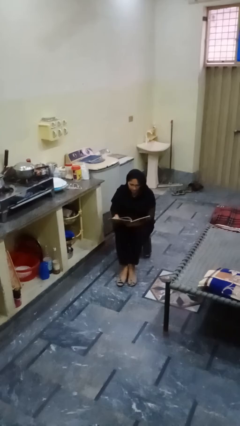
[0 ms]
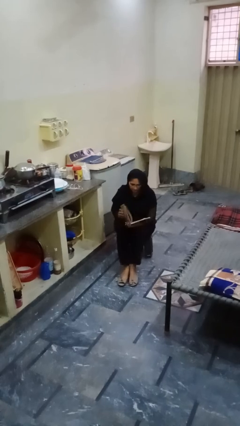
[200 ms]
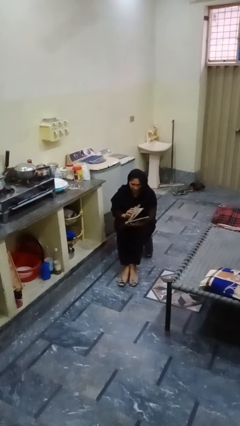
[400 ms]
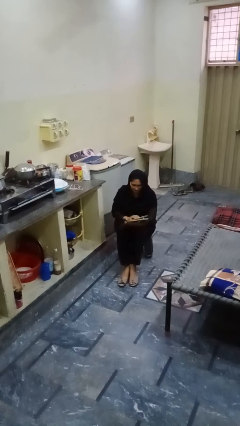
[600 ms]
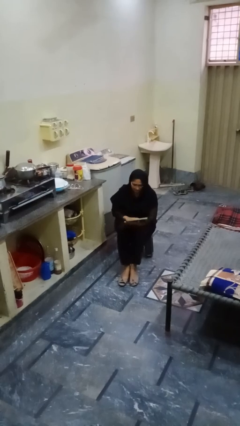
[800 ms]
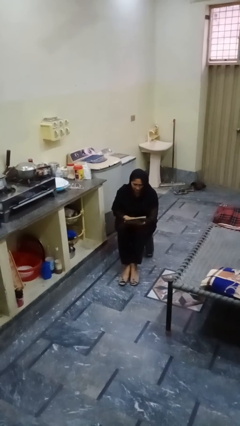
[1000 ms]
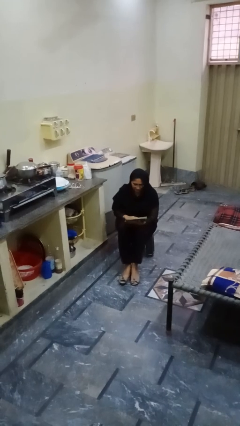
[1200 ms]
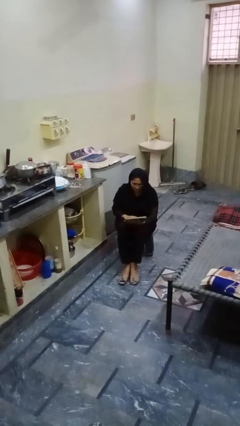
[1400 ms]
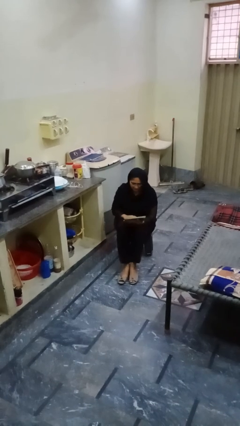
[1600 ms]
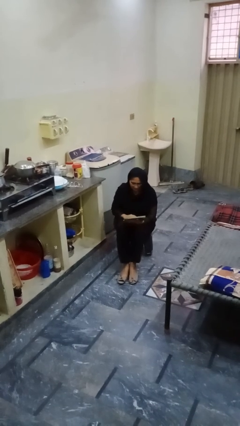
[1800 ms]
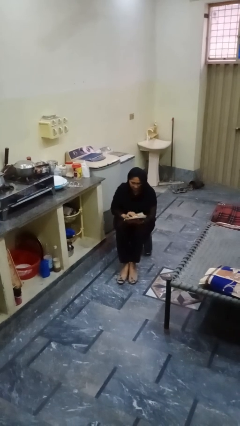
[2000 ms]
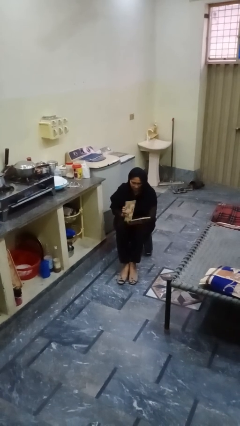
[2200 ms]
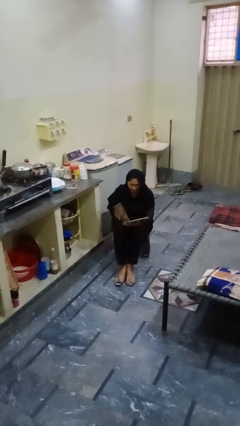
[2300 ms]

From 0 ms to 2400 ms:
person reads book

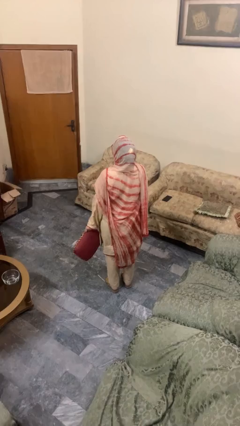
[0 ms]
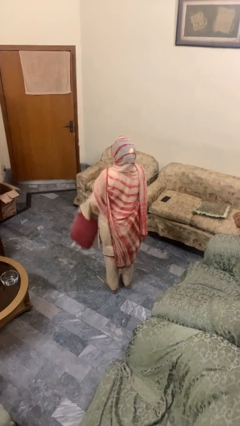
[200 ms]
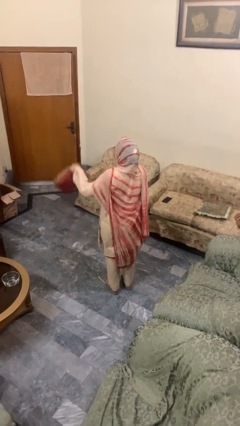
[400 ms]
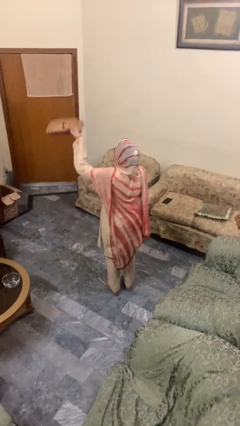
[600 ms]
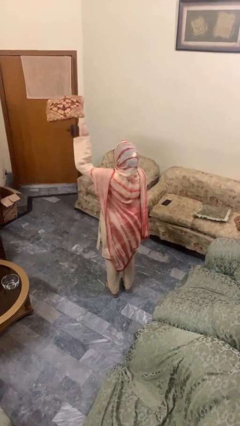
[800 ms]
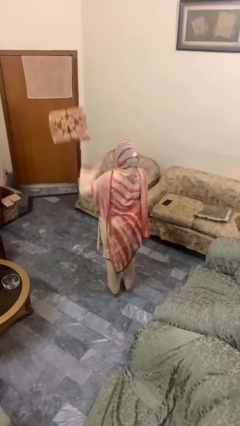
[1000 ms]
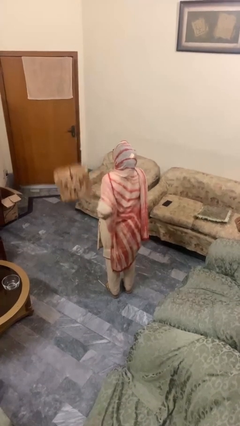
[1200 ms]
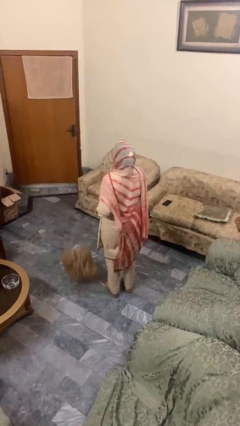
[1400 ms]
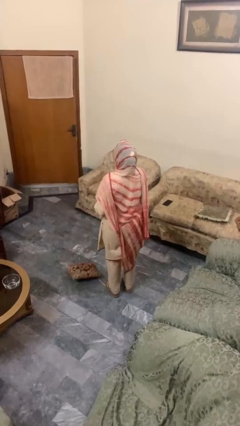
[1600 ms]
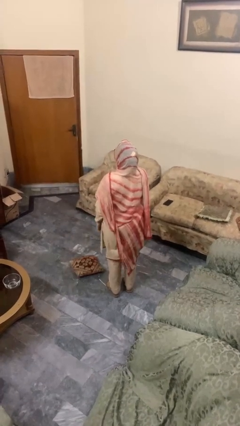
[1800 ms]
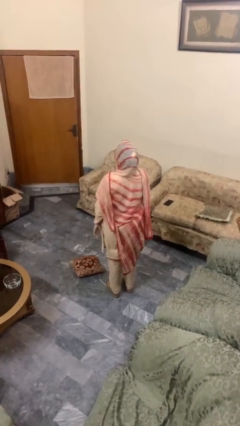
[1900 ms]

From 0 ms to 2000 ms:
person throws object into air

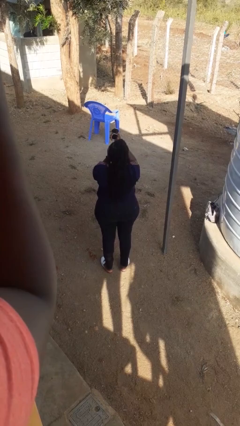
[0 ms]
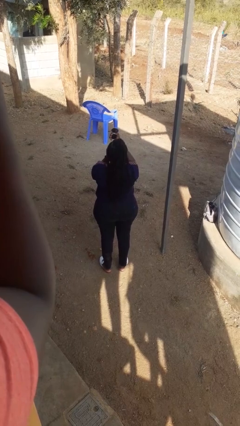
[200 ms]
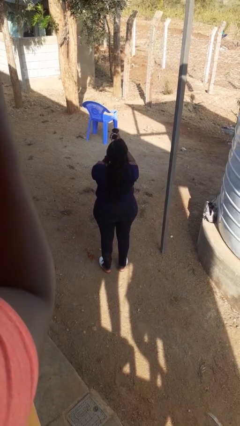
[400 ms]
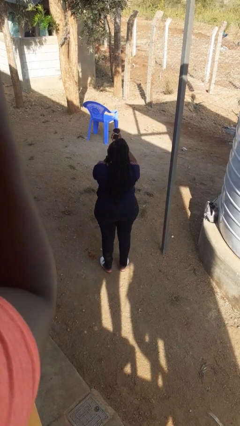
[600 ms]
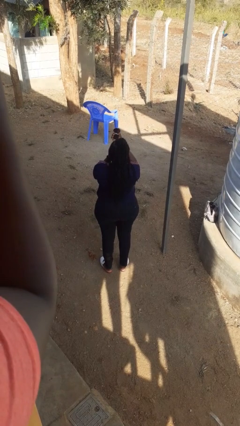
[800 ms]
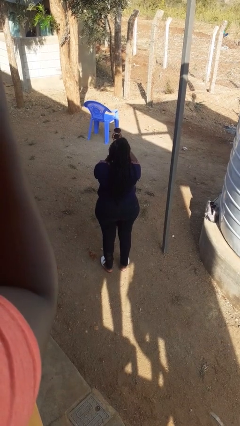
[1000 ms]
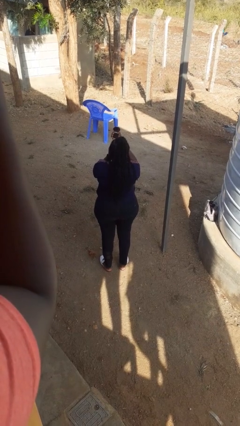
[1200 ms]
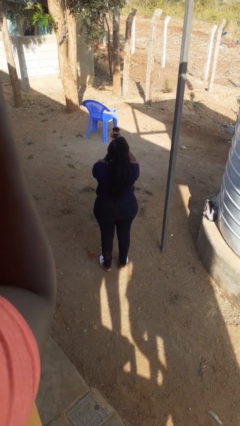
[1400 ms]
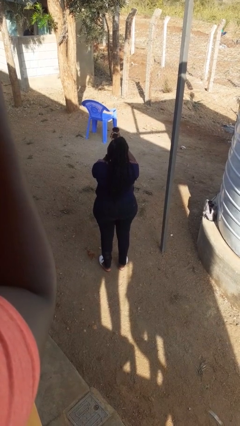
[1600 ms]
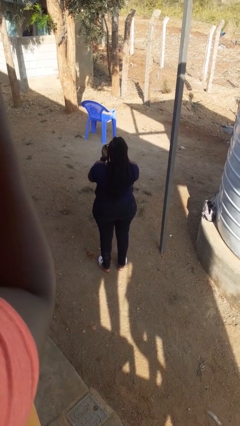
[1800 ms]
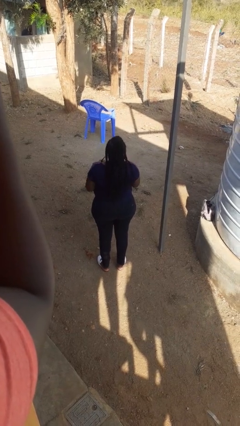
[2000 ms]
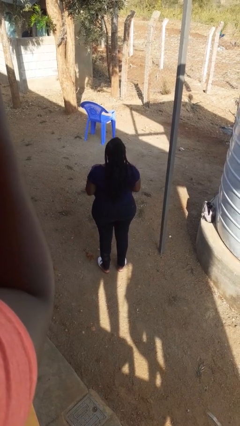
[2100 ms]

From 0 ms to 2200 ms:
person applies eye makeup

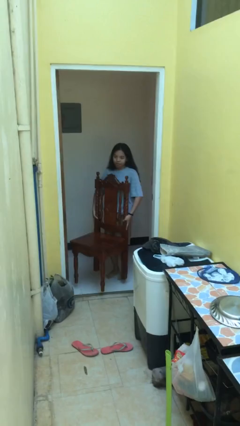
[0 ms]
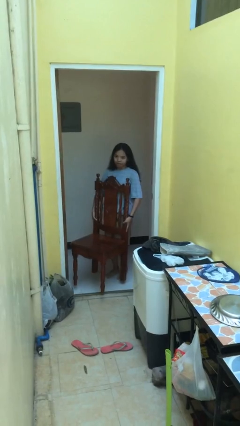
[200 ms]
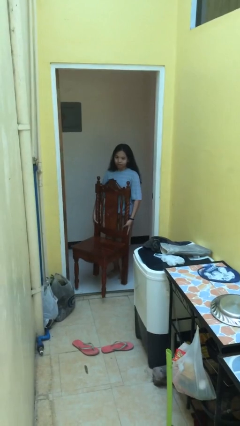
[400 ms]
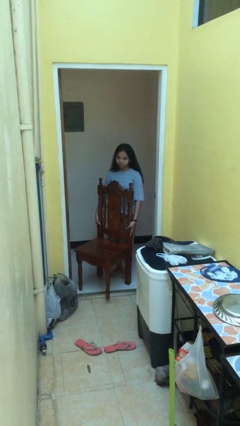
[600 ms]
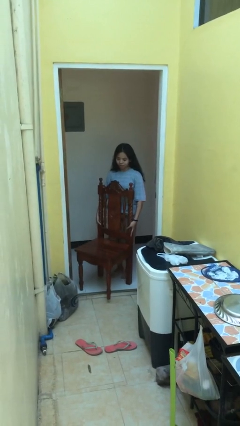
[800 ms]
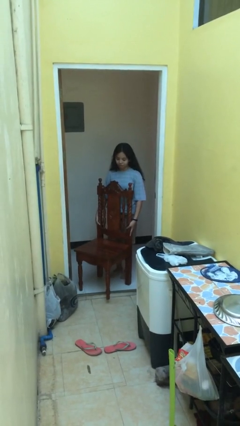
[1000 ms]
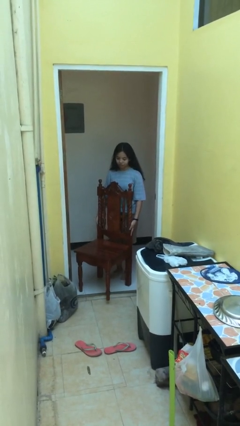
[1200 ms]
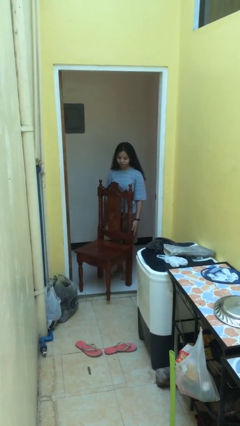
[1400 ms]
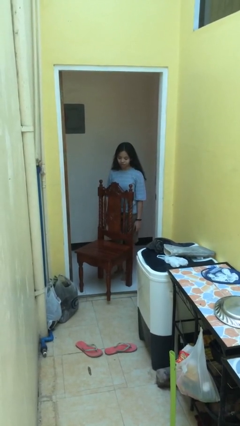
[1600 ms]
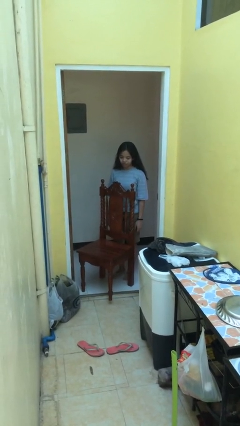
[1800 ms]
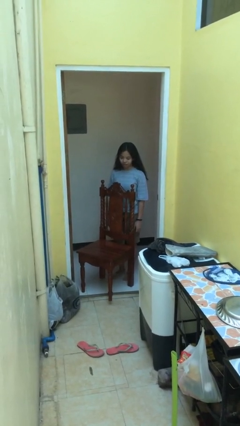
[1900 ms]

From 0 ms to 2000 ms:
person puts down object on floor

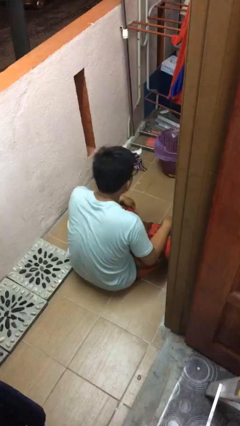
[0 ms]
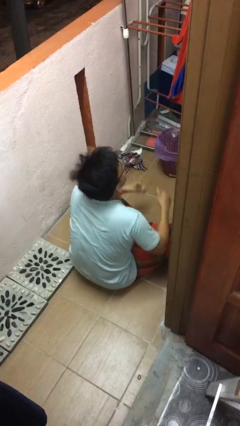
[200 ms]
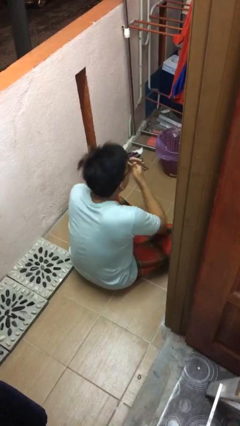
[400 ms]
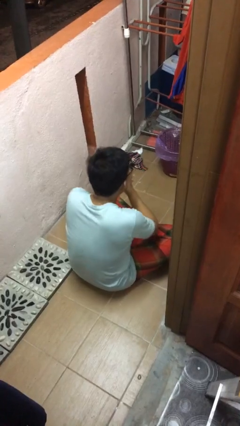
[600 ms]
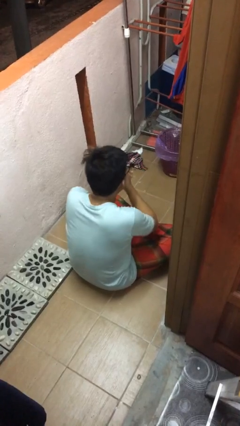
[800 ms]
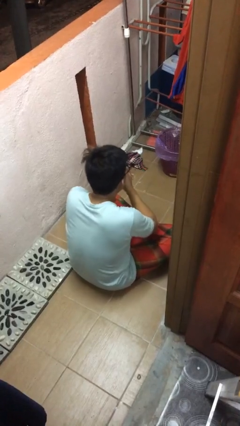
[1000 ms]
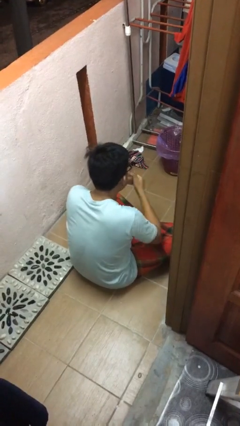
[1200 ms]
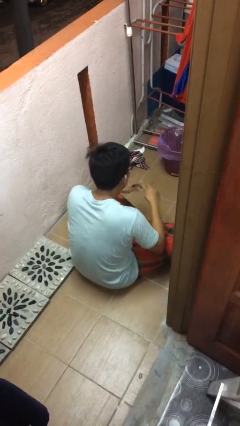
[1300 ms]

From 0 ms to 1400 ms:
person sneezes into hand

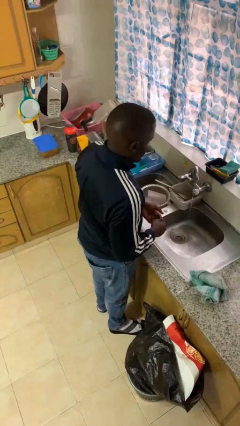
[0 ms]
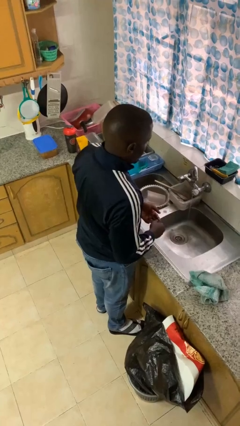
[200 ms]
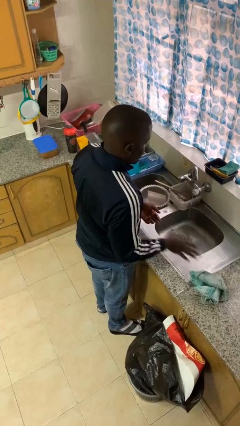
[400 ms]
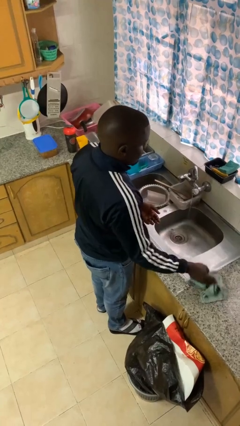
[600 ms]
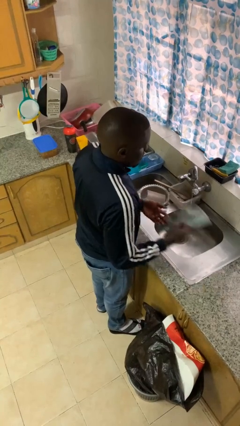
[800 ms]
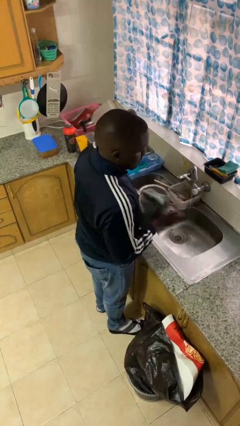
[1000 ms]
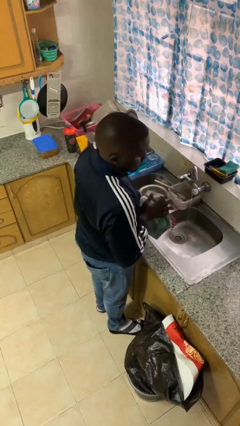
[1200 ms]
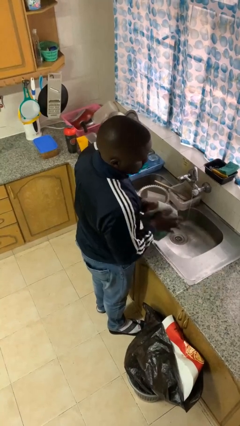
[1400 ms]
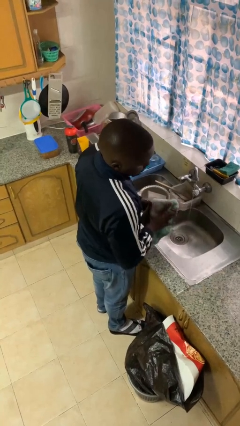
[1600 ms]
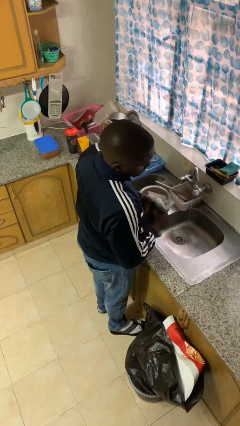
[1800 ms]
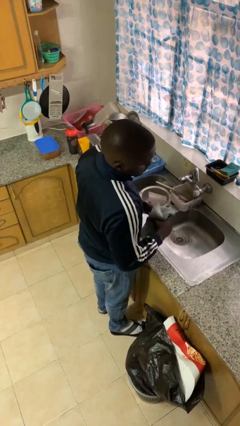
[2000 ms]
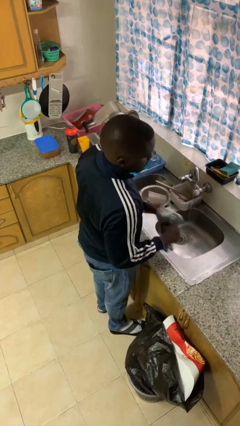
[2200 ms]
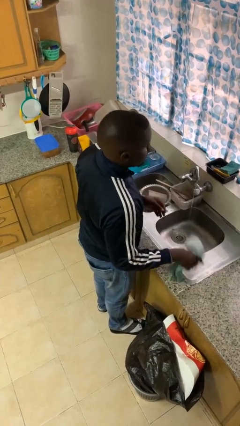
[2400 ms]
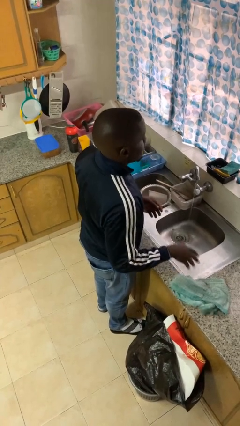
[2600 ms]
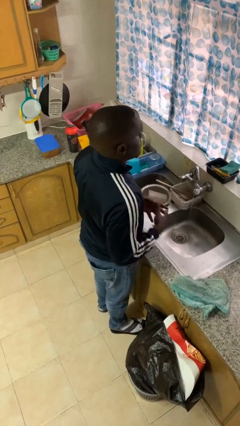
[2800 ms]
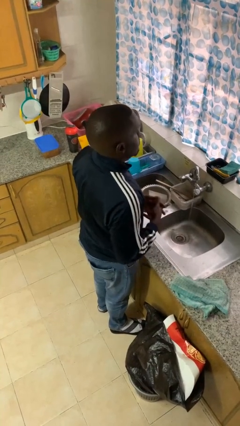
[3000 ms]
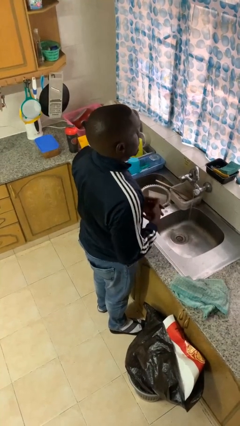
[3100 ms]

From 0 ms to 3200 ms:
person dries hands with towel

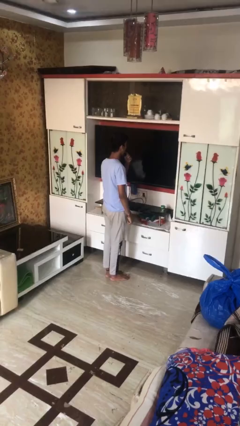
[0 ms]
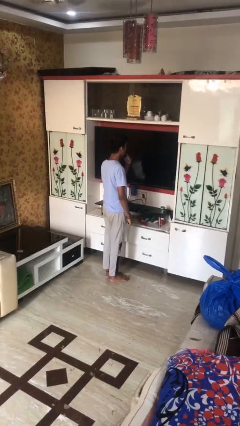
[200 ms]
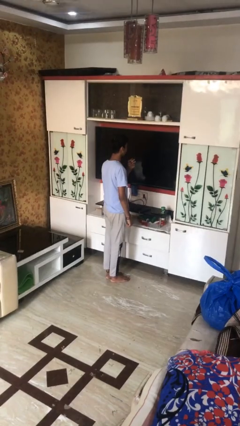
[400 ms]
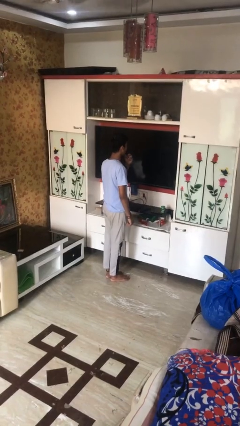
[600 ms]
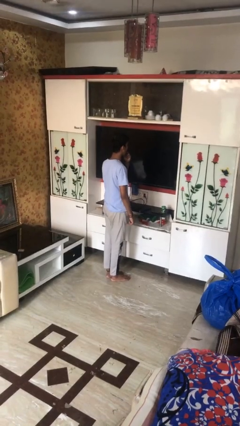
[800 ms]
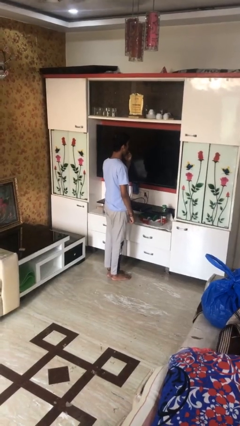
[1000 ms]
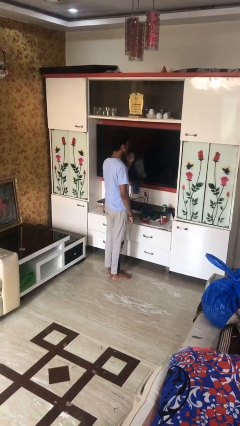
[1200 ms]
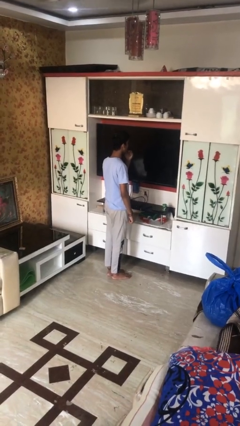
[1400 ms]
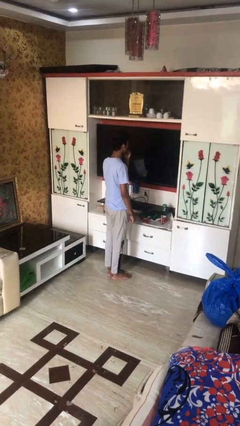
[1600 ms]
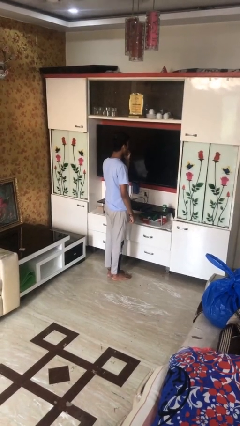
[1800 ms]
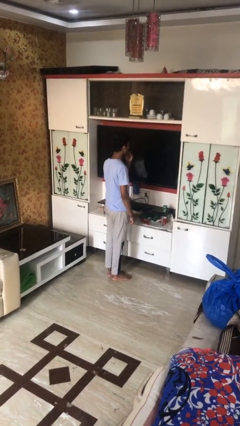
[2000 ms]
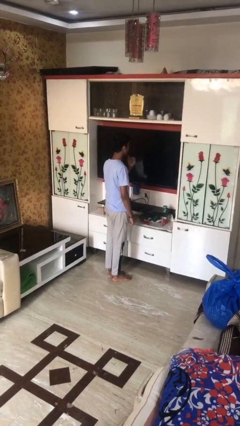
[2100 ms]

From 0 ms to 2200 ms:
person licks fingers

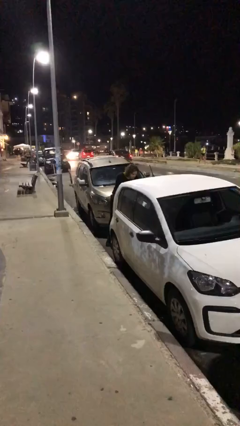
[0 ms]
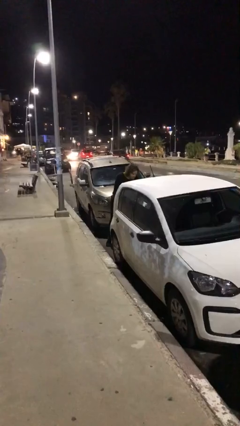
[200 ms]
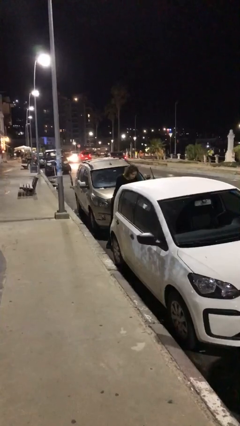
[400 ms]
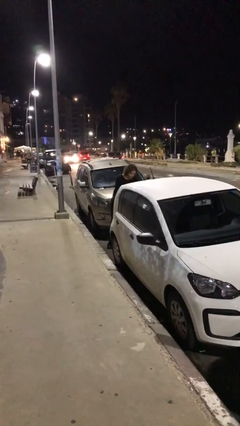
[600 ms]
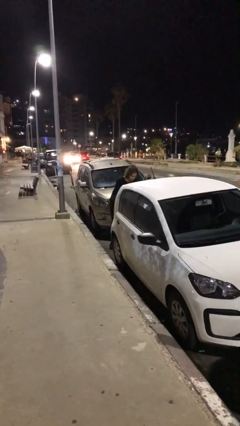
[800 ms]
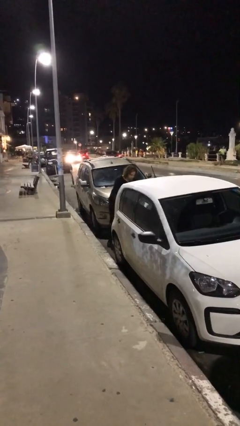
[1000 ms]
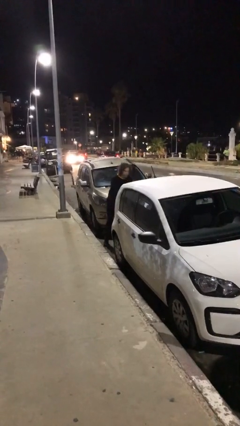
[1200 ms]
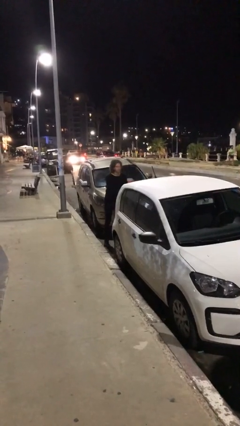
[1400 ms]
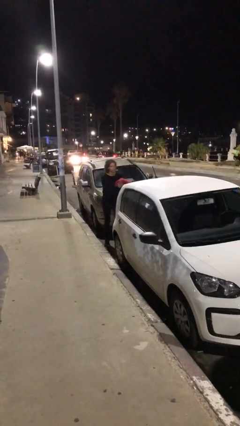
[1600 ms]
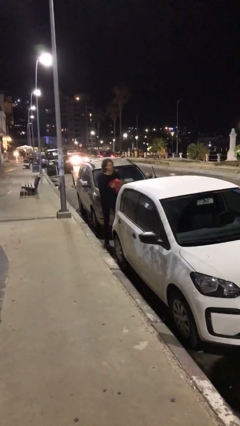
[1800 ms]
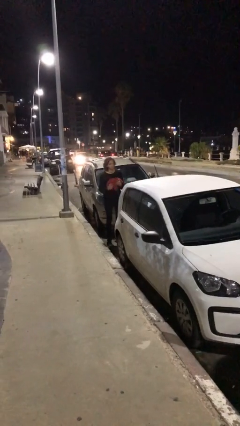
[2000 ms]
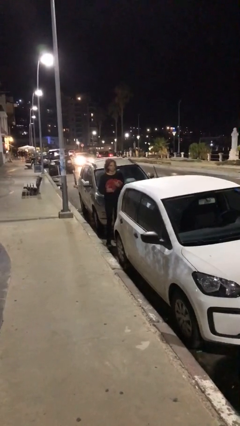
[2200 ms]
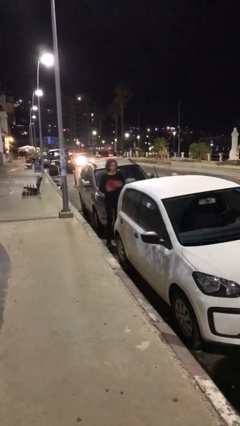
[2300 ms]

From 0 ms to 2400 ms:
person unloads car
